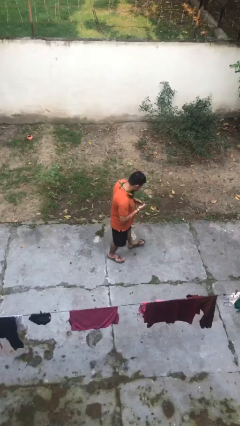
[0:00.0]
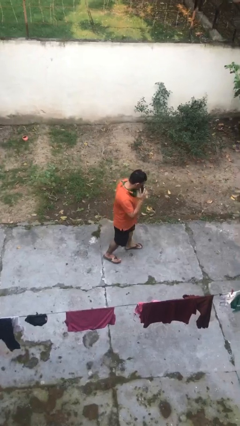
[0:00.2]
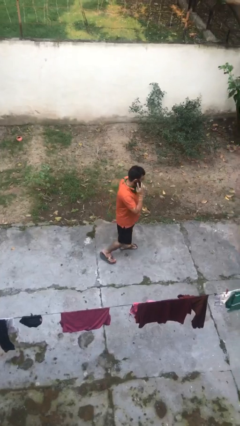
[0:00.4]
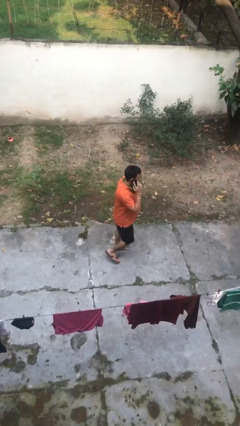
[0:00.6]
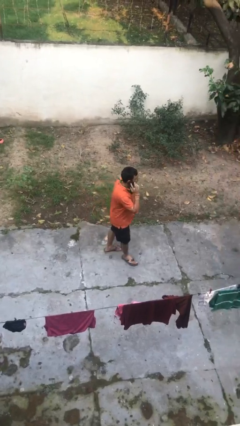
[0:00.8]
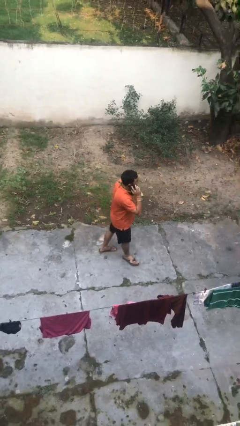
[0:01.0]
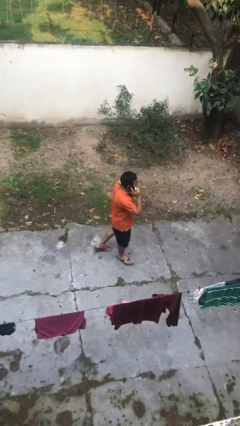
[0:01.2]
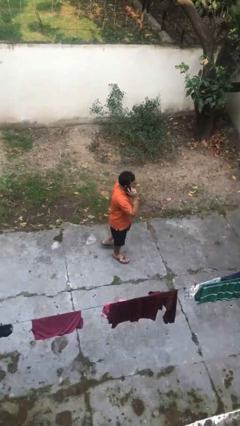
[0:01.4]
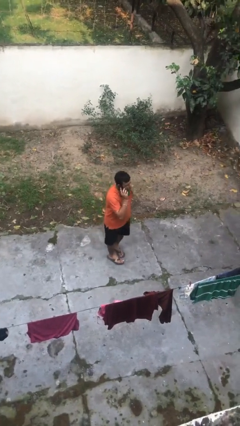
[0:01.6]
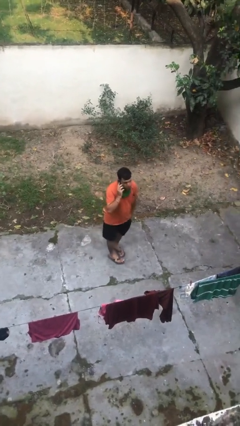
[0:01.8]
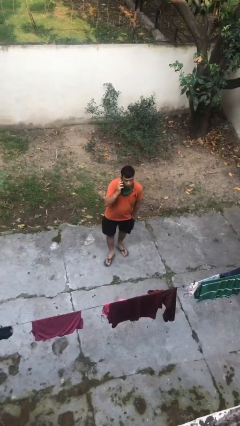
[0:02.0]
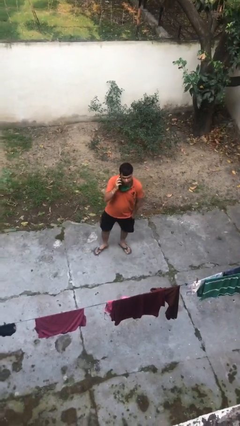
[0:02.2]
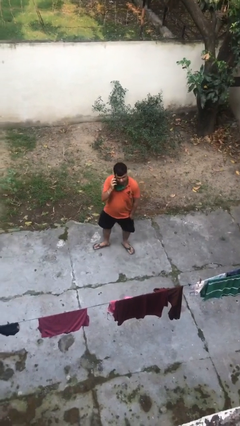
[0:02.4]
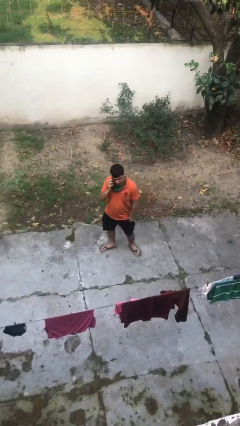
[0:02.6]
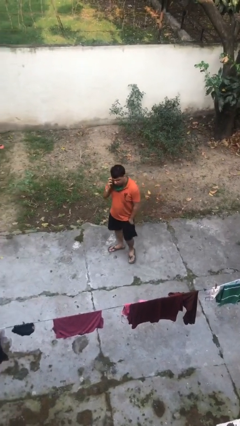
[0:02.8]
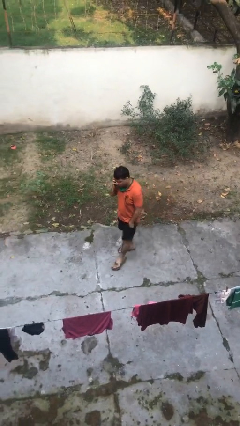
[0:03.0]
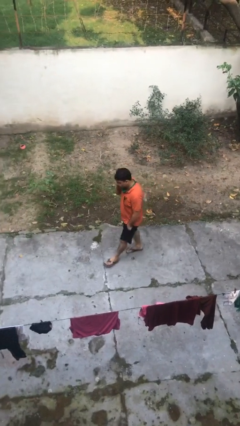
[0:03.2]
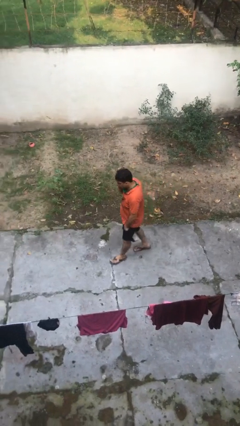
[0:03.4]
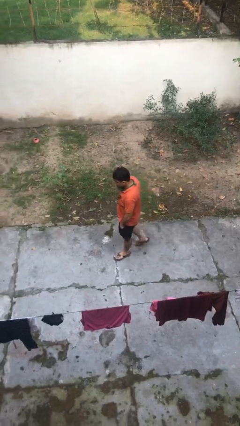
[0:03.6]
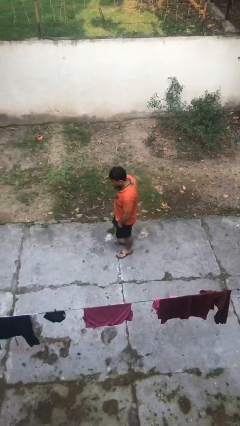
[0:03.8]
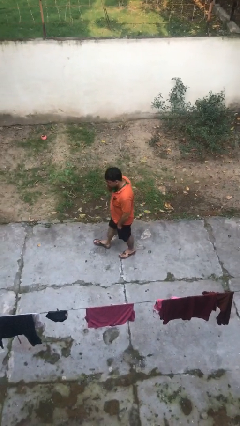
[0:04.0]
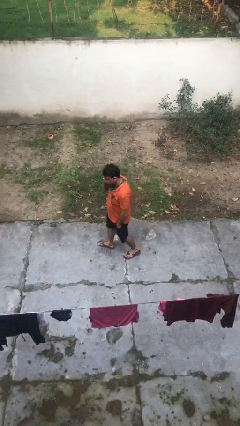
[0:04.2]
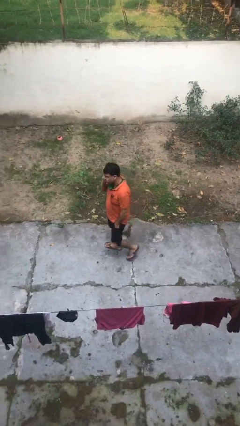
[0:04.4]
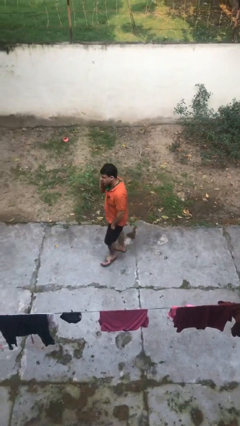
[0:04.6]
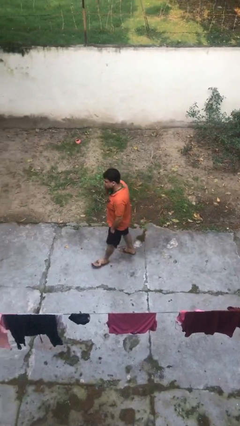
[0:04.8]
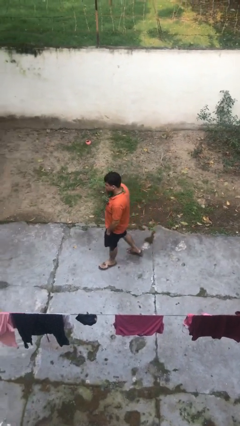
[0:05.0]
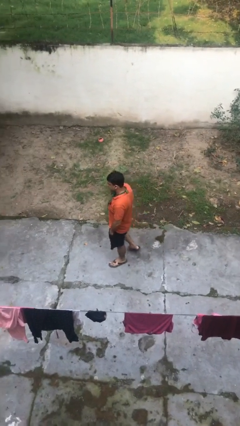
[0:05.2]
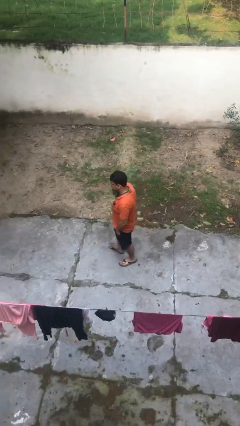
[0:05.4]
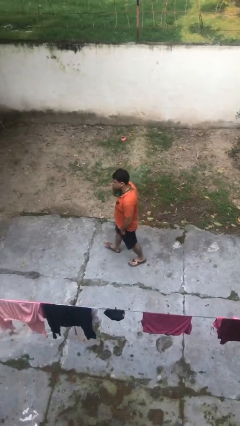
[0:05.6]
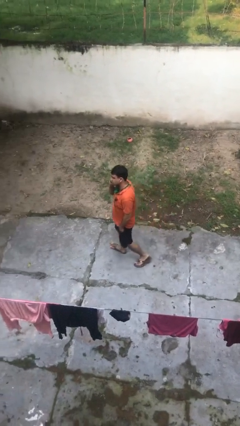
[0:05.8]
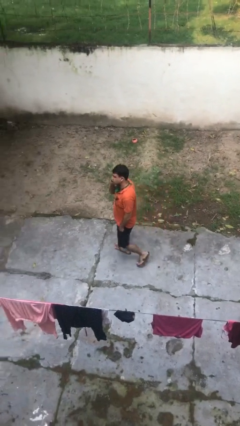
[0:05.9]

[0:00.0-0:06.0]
person talks on phone

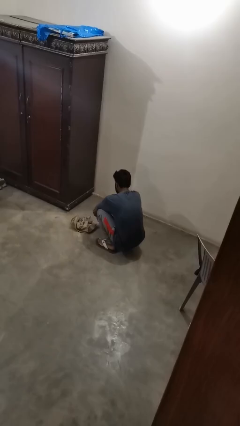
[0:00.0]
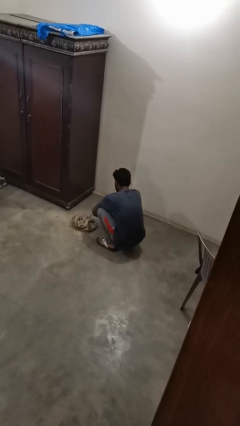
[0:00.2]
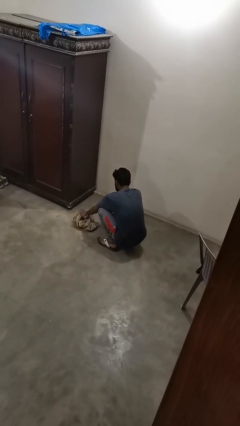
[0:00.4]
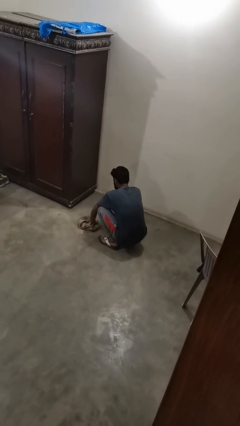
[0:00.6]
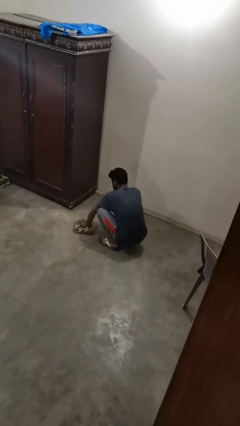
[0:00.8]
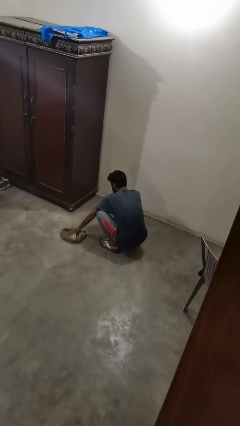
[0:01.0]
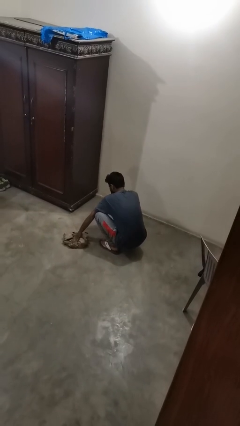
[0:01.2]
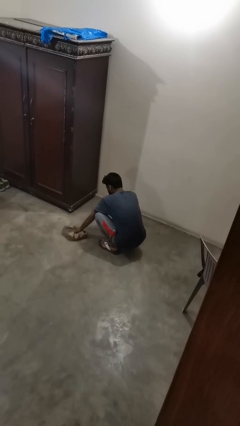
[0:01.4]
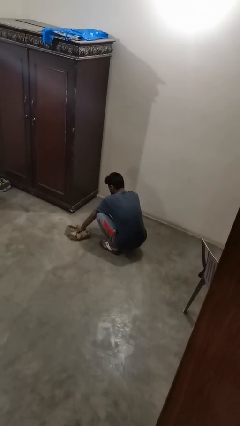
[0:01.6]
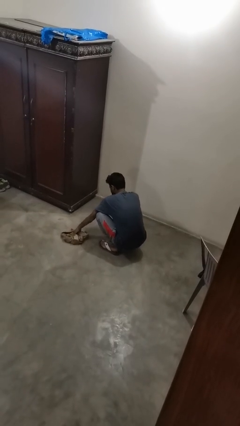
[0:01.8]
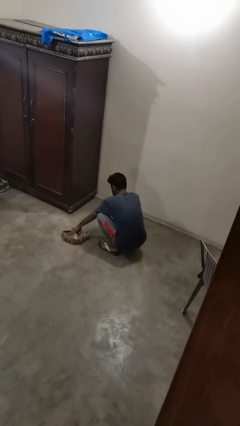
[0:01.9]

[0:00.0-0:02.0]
person mops

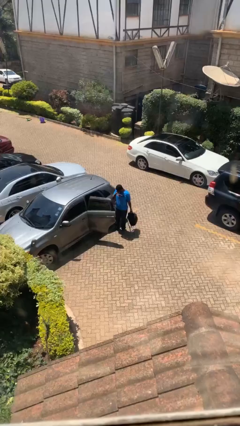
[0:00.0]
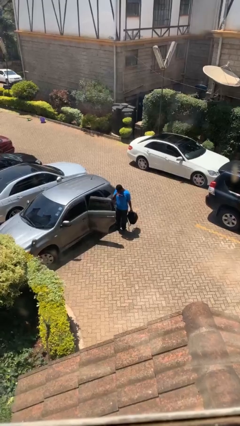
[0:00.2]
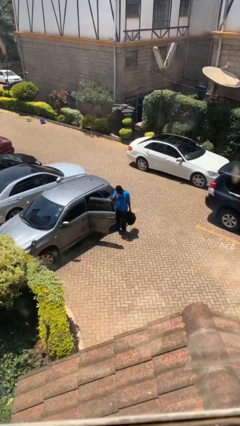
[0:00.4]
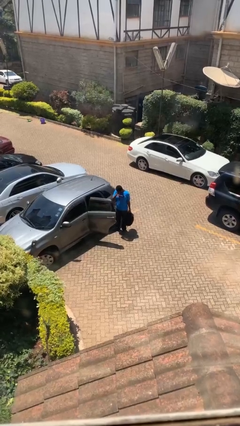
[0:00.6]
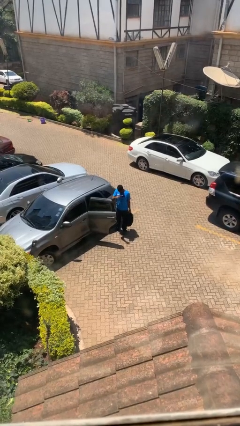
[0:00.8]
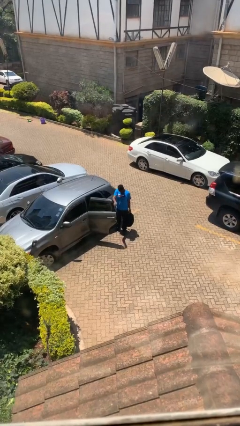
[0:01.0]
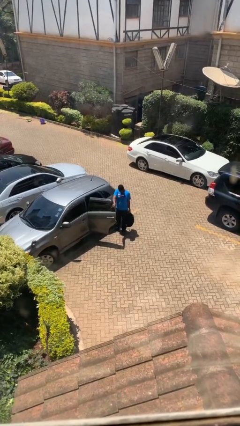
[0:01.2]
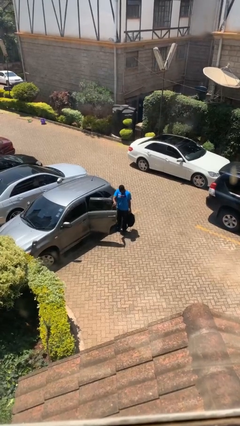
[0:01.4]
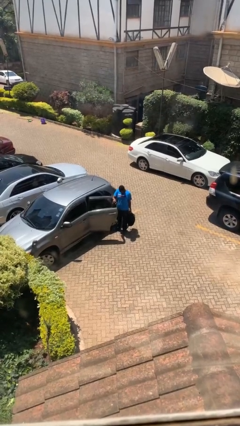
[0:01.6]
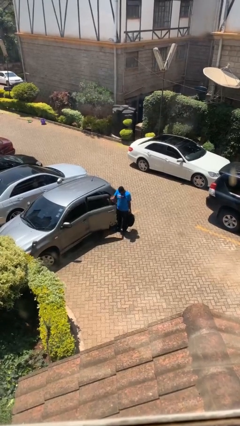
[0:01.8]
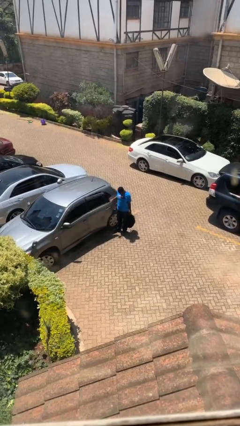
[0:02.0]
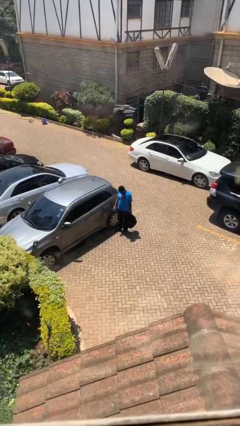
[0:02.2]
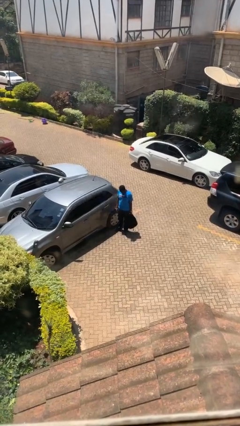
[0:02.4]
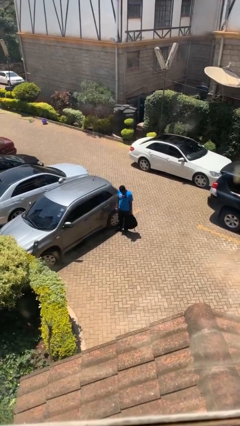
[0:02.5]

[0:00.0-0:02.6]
person closes car door

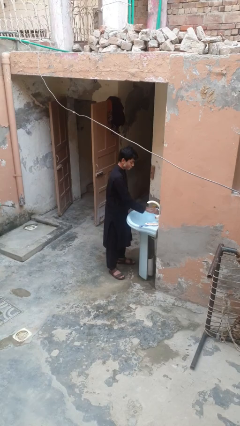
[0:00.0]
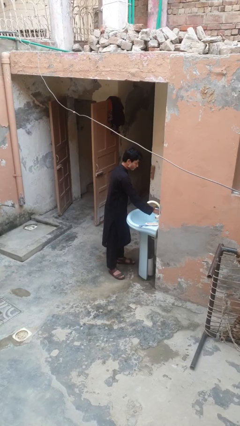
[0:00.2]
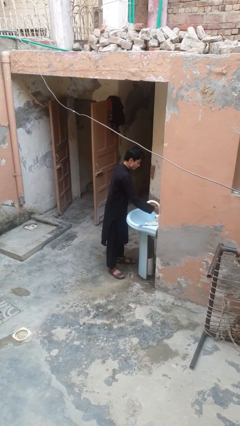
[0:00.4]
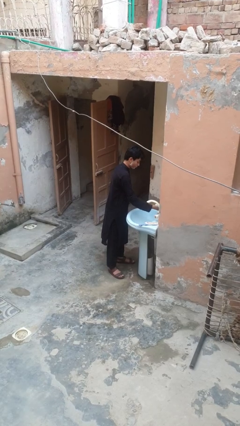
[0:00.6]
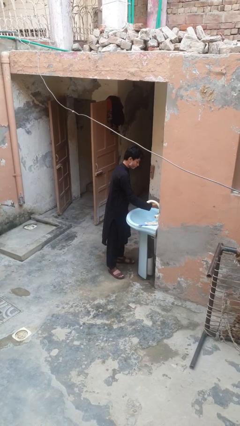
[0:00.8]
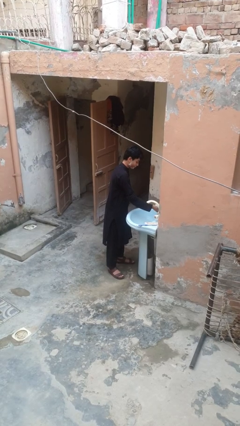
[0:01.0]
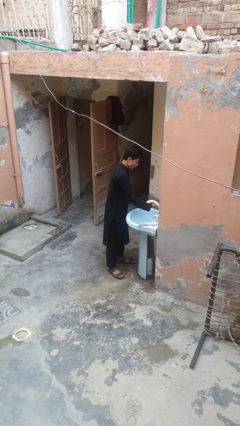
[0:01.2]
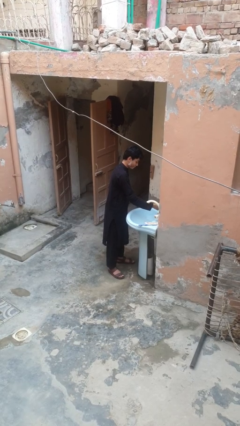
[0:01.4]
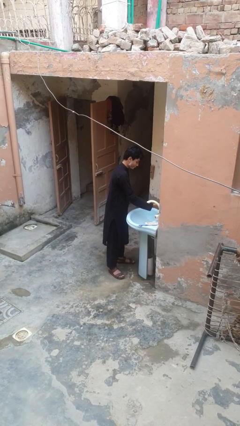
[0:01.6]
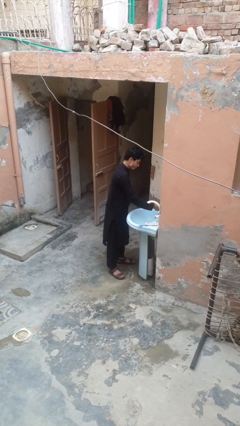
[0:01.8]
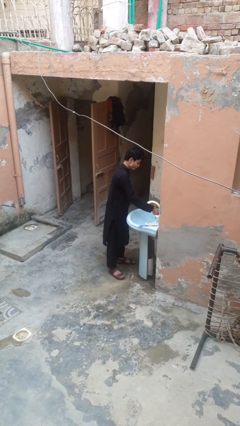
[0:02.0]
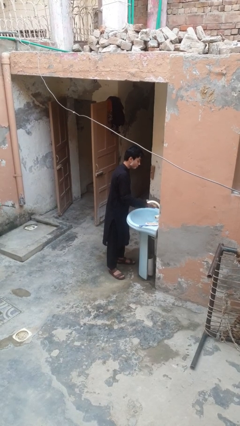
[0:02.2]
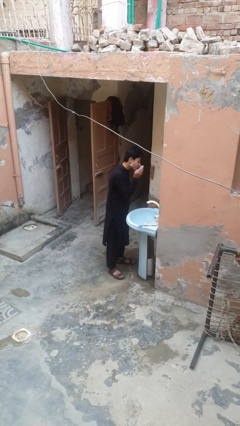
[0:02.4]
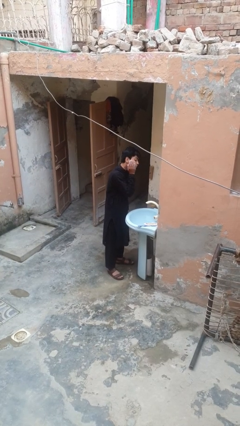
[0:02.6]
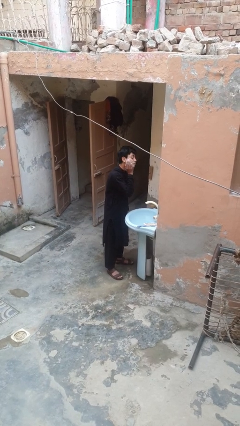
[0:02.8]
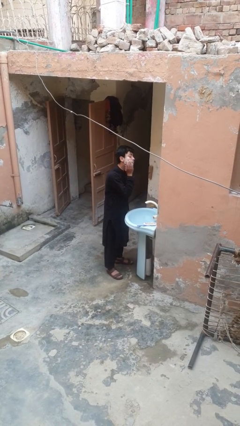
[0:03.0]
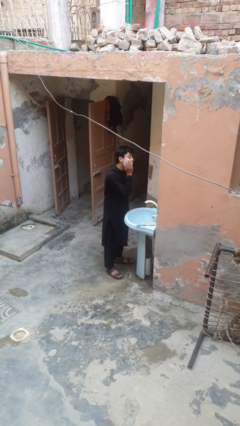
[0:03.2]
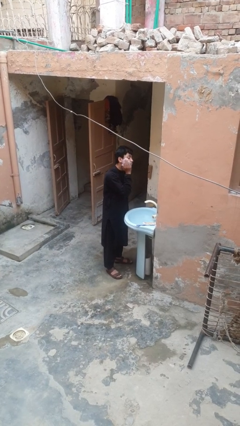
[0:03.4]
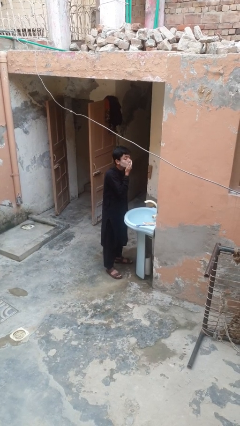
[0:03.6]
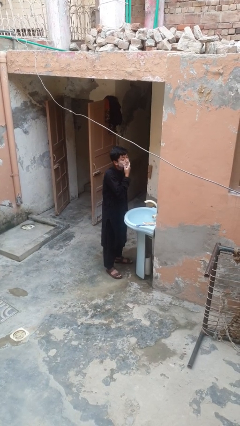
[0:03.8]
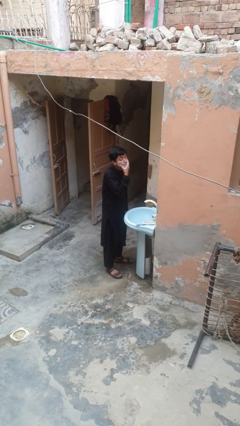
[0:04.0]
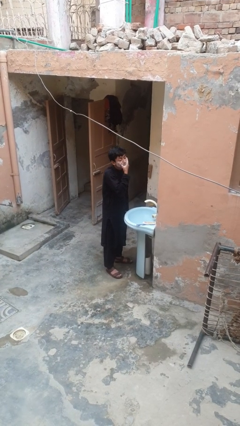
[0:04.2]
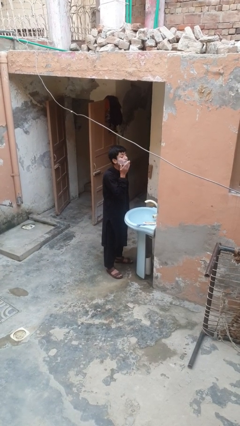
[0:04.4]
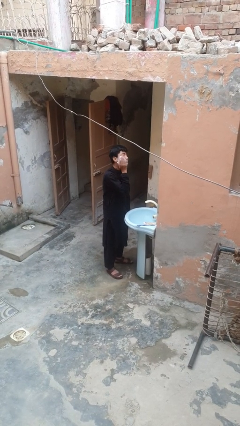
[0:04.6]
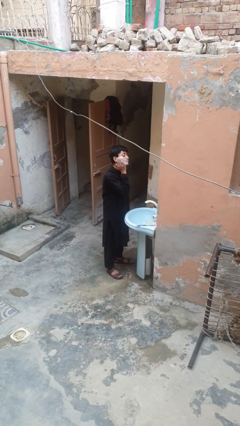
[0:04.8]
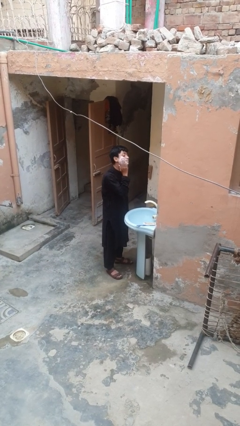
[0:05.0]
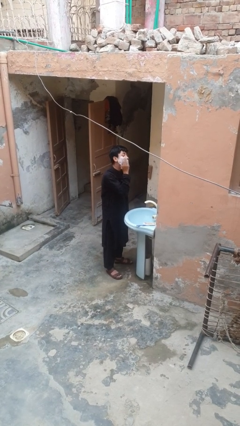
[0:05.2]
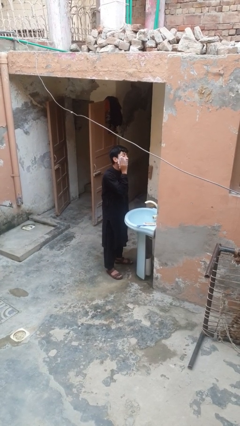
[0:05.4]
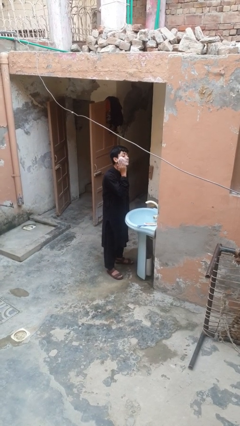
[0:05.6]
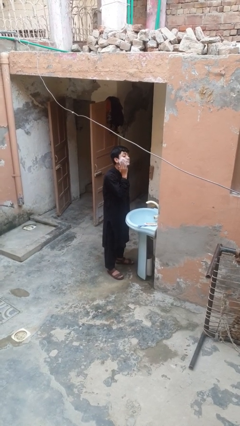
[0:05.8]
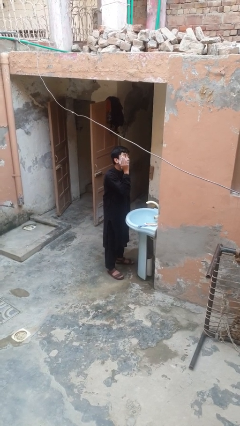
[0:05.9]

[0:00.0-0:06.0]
person applies shaving cream

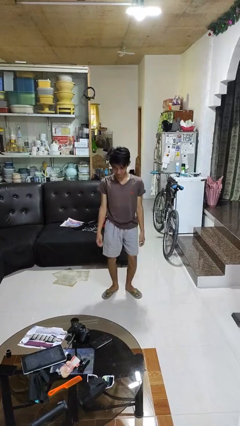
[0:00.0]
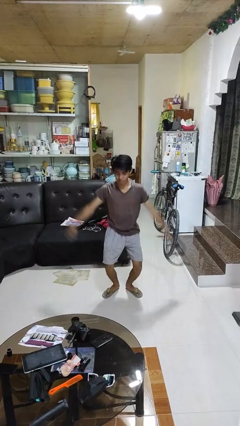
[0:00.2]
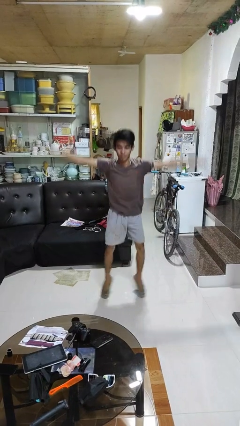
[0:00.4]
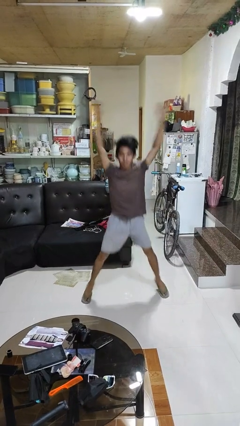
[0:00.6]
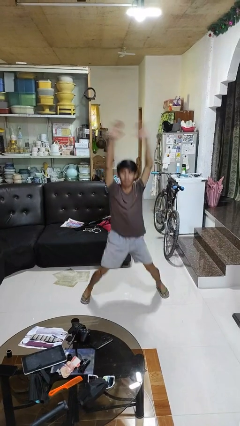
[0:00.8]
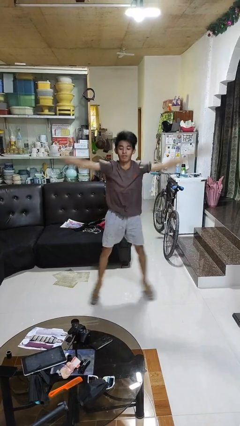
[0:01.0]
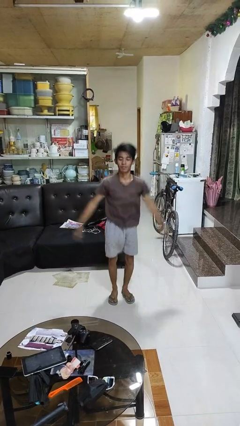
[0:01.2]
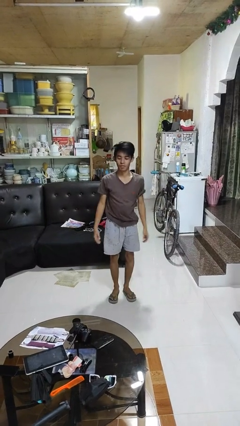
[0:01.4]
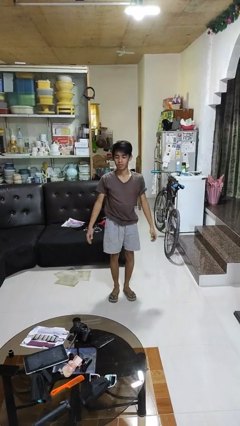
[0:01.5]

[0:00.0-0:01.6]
person exercises with jumping jacks
